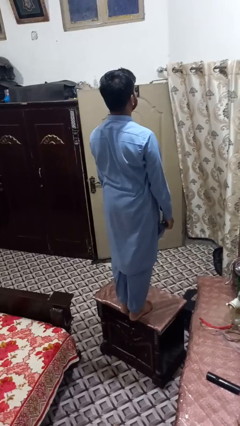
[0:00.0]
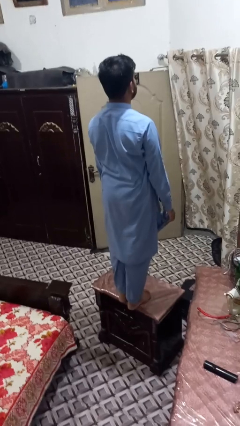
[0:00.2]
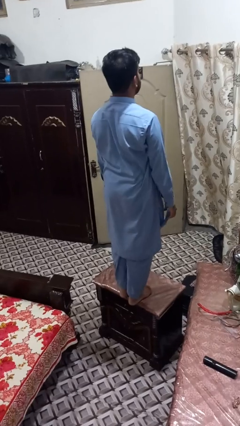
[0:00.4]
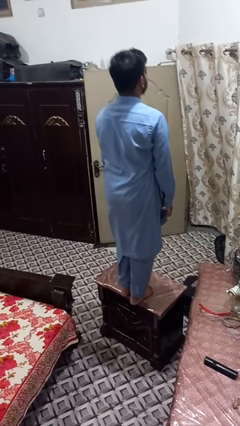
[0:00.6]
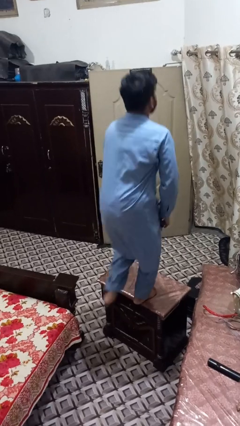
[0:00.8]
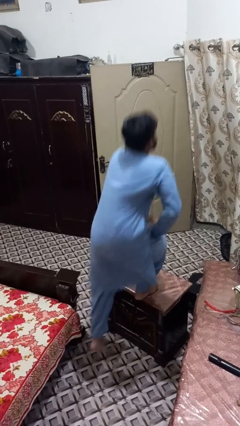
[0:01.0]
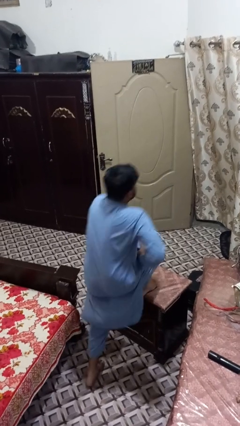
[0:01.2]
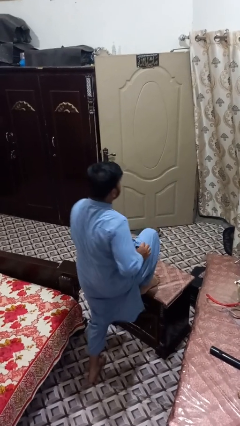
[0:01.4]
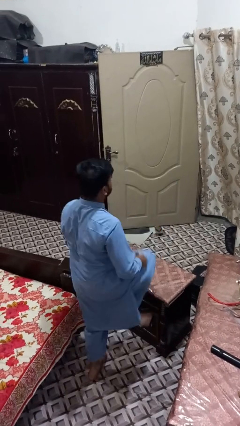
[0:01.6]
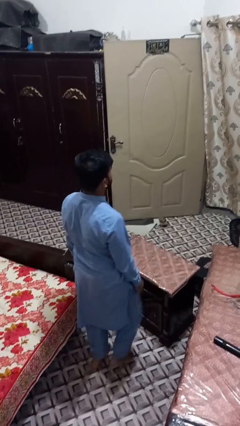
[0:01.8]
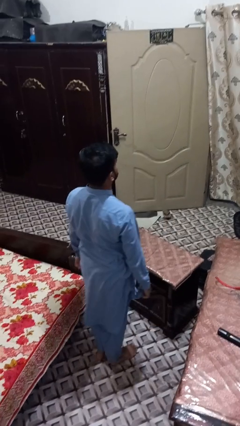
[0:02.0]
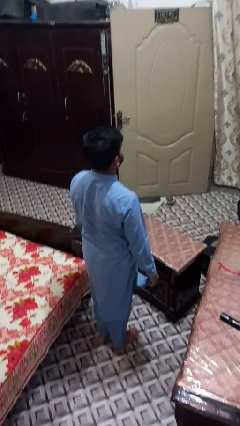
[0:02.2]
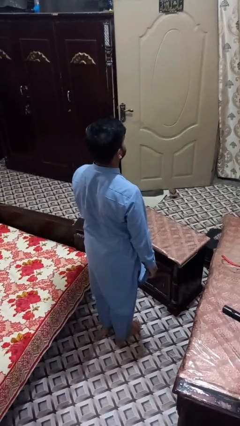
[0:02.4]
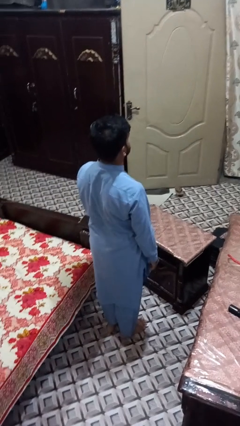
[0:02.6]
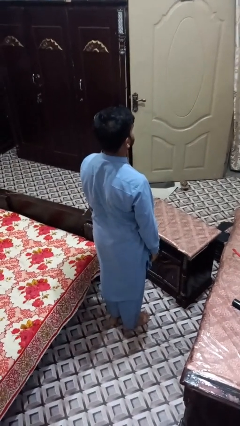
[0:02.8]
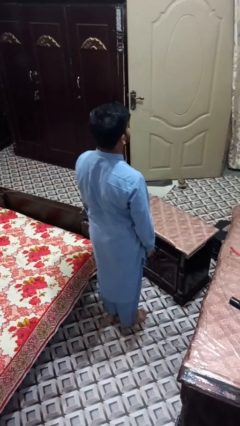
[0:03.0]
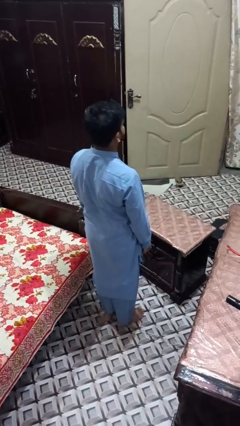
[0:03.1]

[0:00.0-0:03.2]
person climbs off table

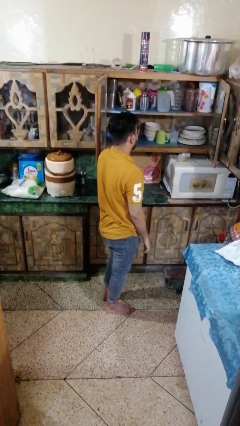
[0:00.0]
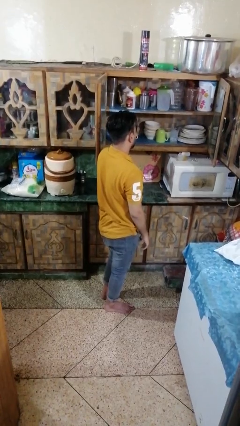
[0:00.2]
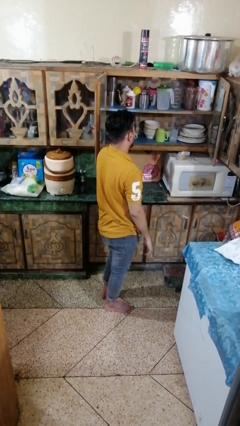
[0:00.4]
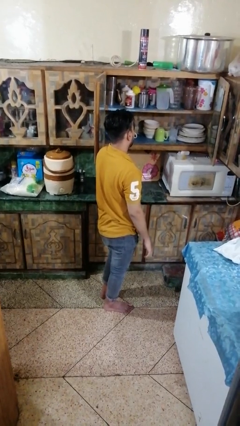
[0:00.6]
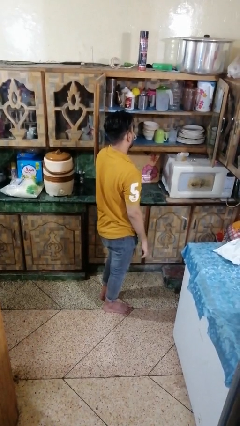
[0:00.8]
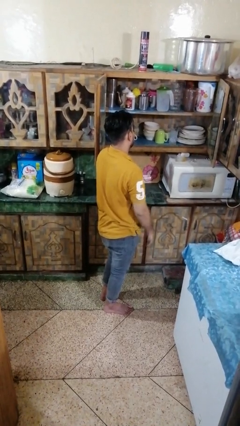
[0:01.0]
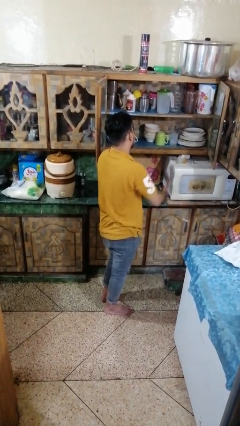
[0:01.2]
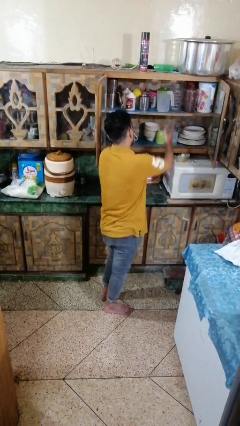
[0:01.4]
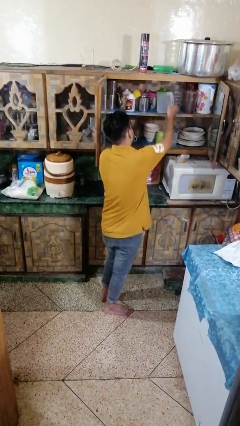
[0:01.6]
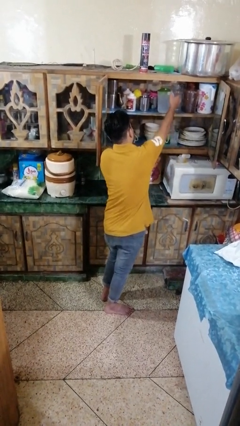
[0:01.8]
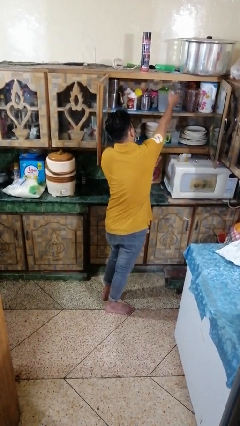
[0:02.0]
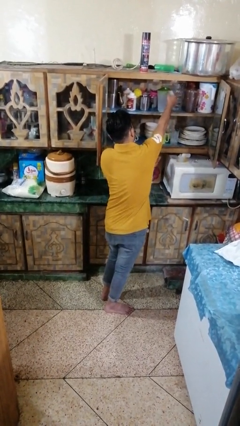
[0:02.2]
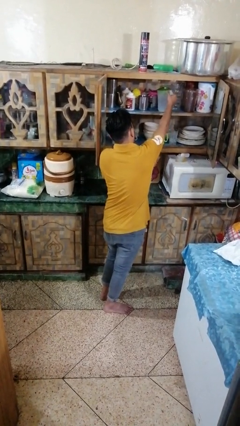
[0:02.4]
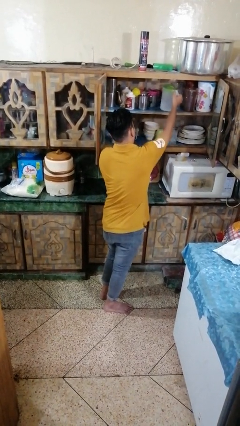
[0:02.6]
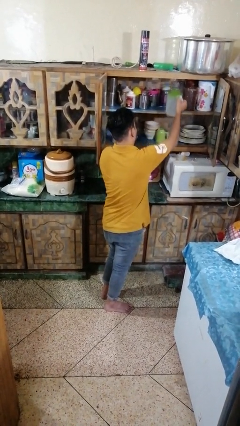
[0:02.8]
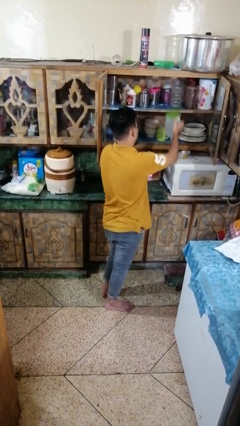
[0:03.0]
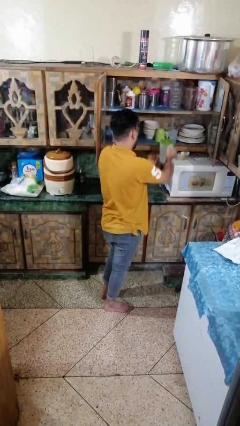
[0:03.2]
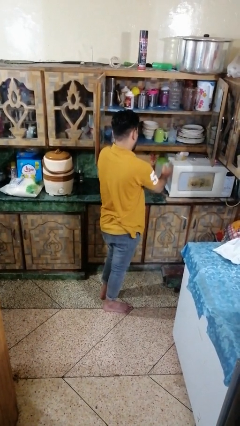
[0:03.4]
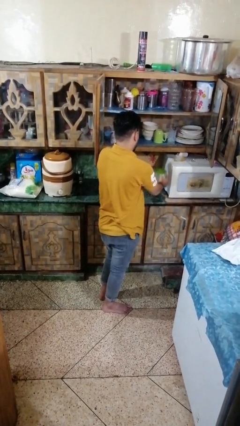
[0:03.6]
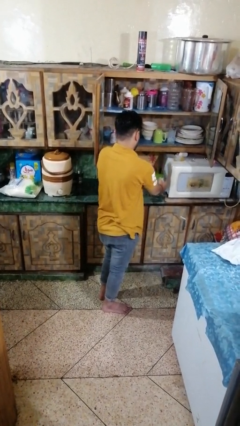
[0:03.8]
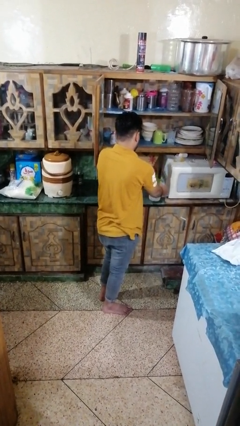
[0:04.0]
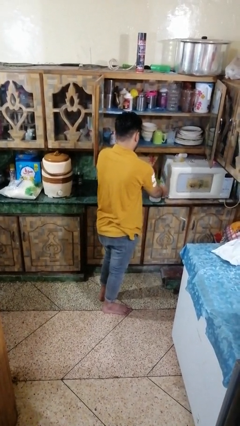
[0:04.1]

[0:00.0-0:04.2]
person takes object from cabinet

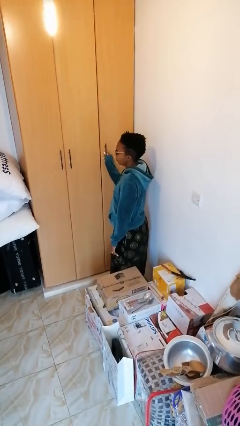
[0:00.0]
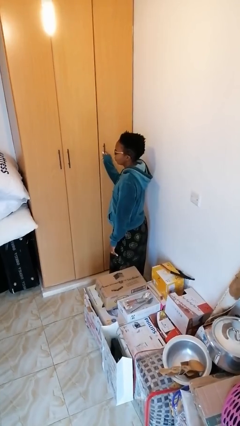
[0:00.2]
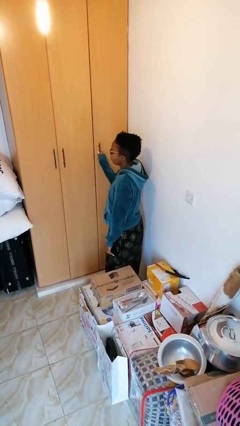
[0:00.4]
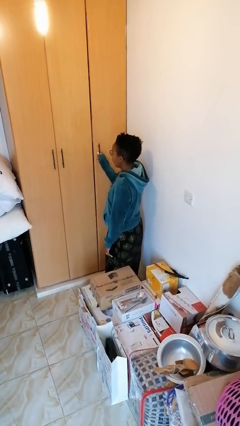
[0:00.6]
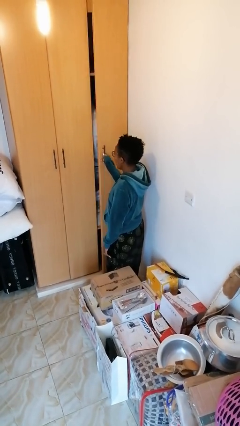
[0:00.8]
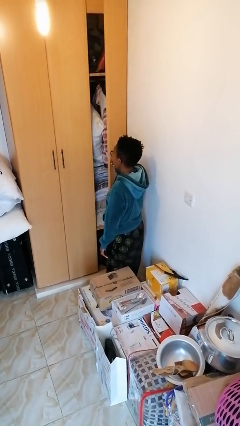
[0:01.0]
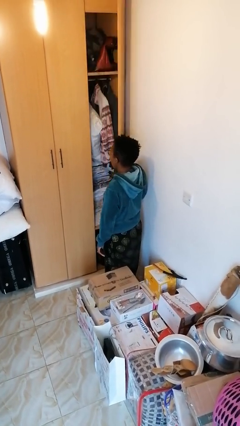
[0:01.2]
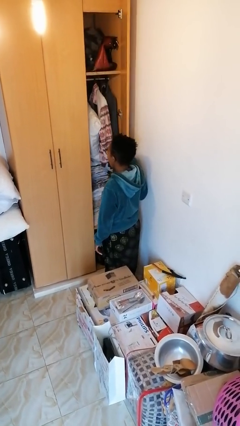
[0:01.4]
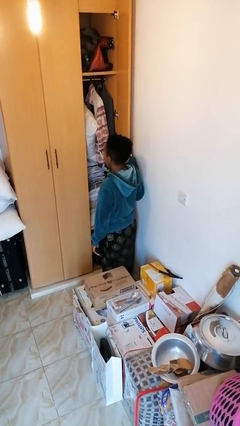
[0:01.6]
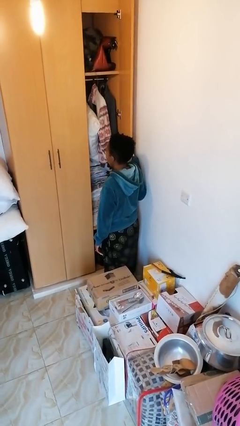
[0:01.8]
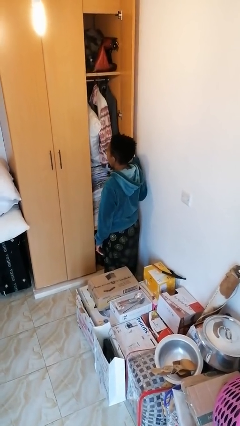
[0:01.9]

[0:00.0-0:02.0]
person opens closet door

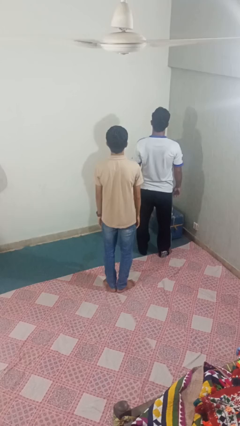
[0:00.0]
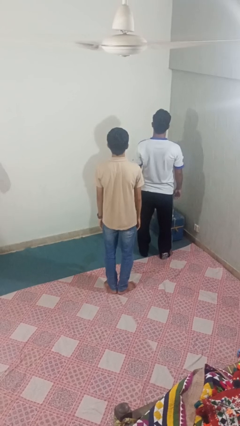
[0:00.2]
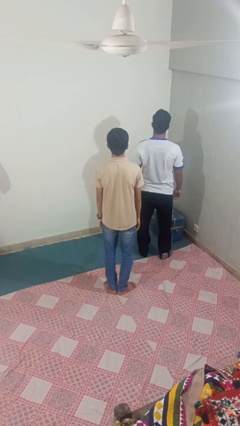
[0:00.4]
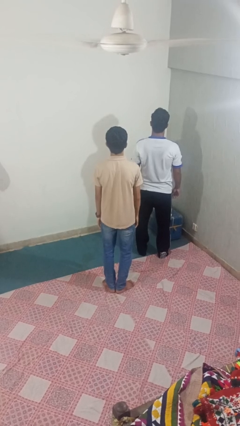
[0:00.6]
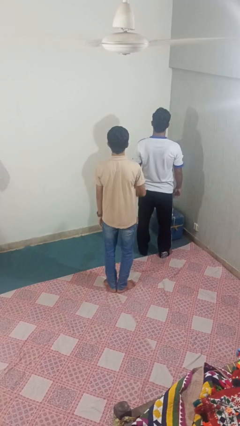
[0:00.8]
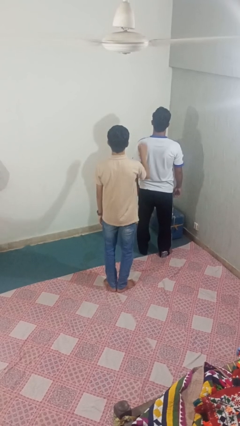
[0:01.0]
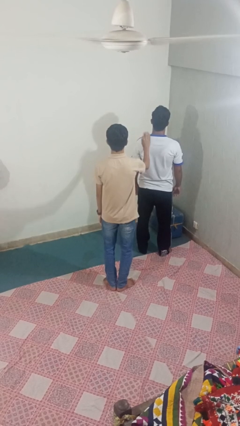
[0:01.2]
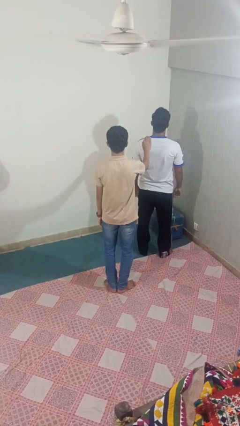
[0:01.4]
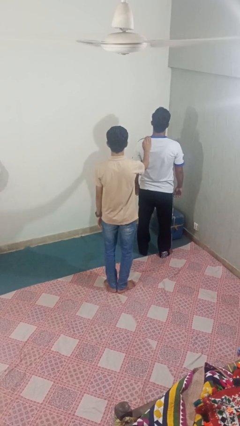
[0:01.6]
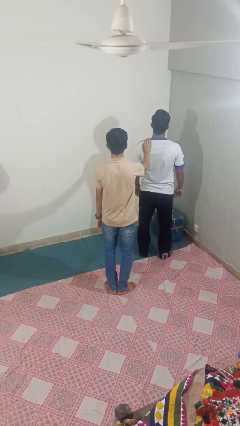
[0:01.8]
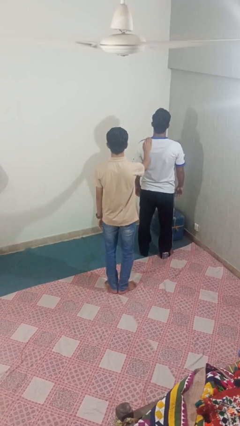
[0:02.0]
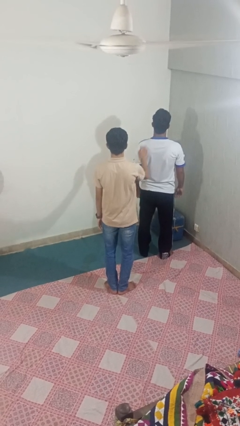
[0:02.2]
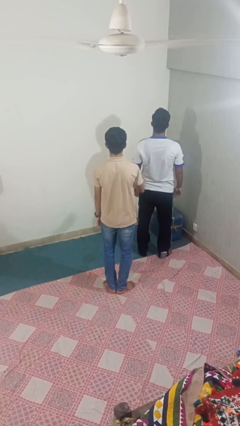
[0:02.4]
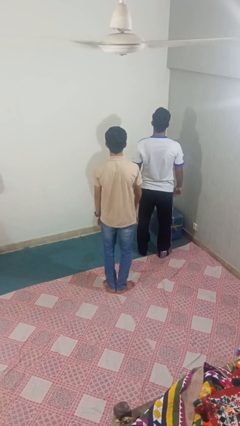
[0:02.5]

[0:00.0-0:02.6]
person touches back of person

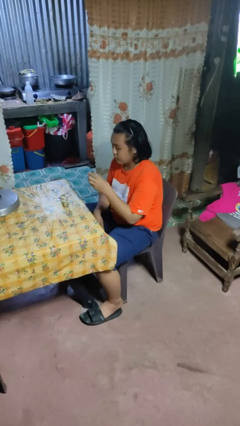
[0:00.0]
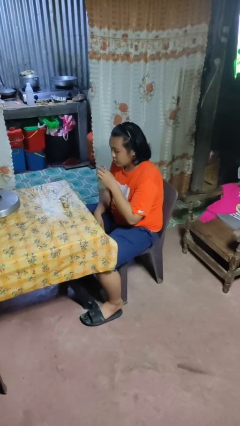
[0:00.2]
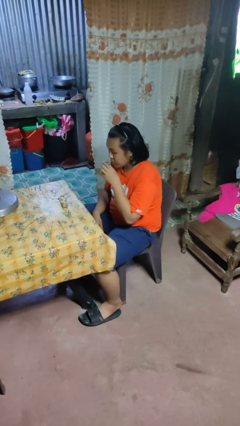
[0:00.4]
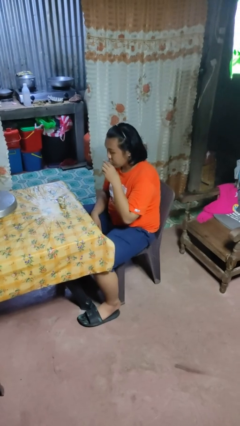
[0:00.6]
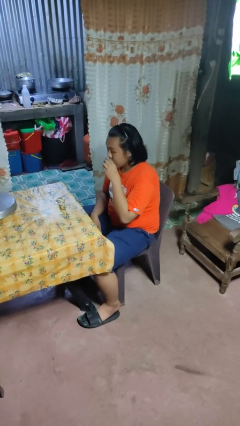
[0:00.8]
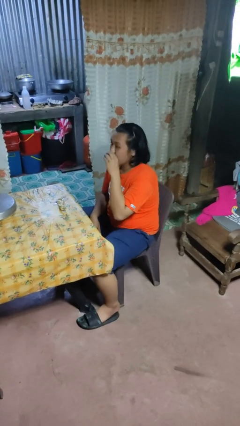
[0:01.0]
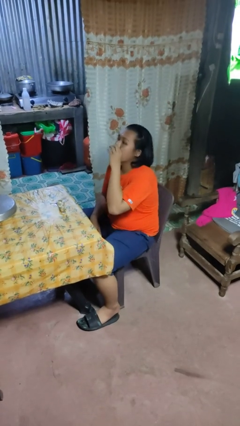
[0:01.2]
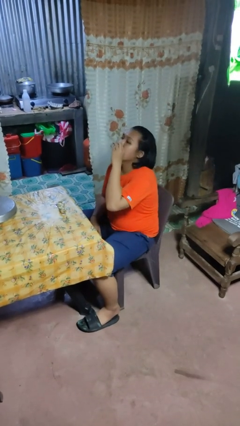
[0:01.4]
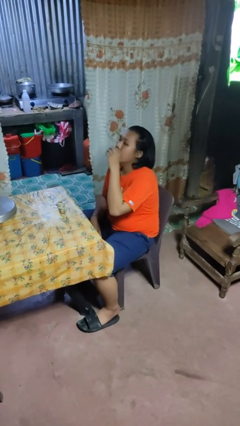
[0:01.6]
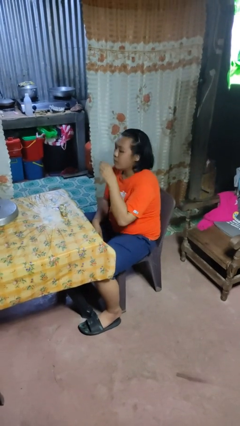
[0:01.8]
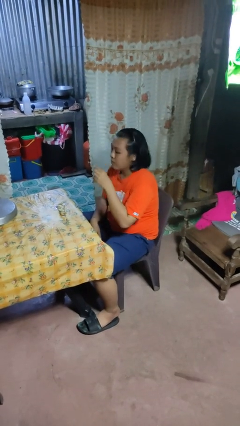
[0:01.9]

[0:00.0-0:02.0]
person drinks from shotglass

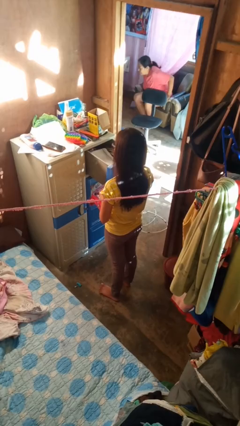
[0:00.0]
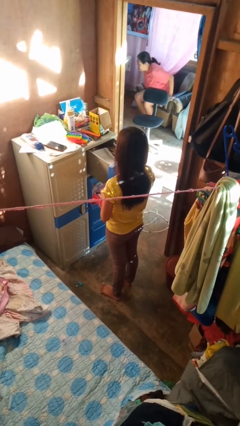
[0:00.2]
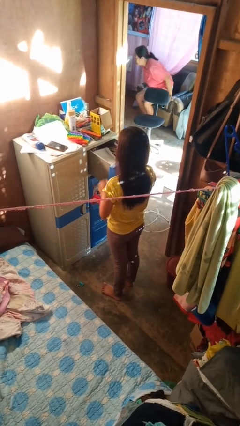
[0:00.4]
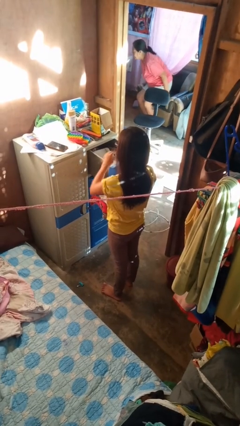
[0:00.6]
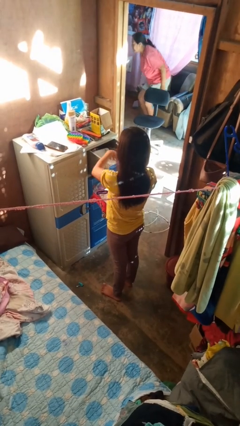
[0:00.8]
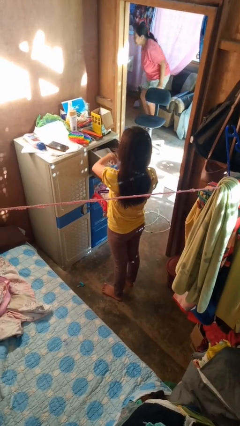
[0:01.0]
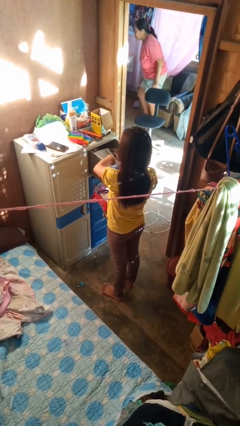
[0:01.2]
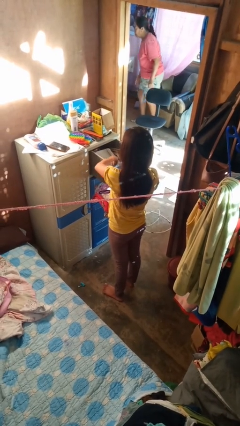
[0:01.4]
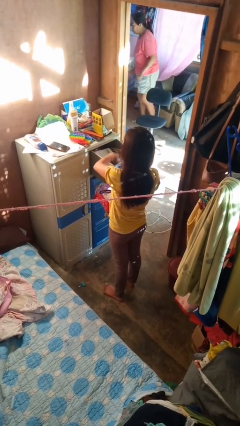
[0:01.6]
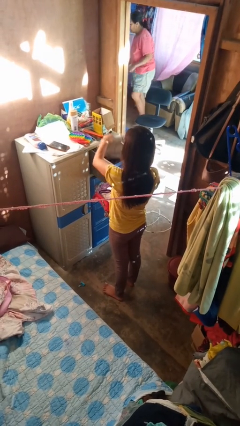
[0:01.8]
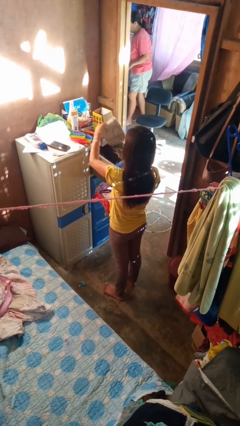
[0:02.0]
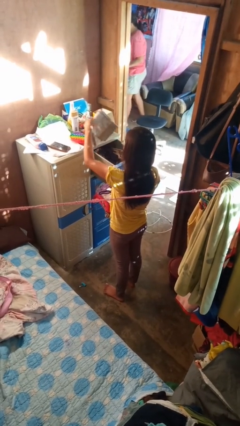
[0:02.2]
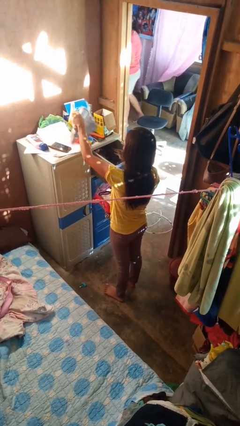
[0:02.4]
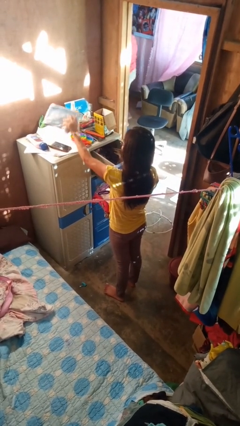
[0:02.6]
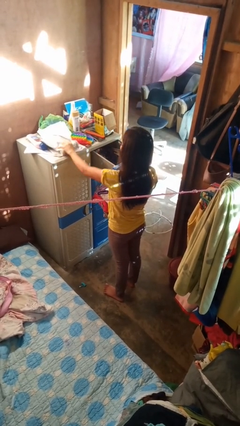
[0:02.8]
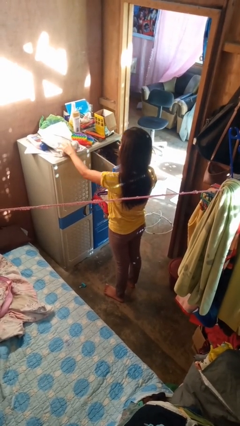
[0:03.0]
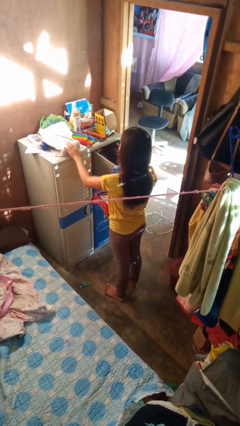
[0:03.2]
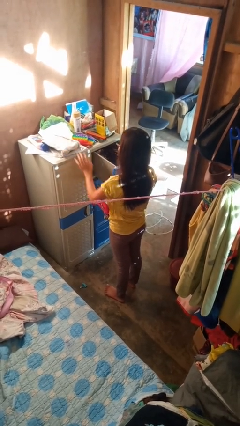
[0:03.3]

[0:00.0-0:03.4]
person takes clothes from dresser
